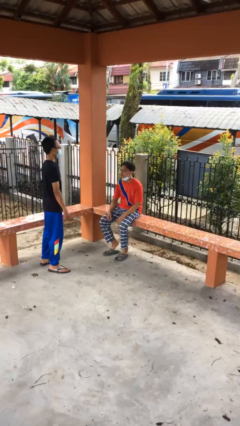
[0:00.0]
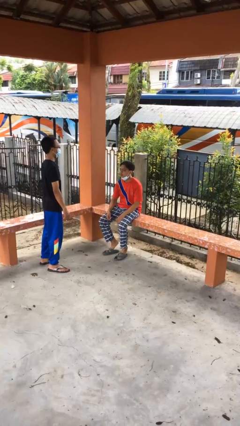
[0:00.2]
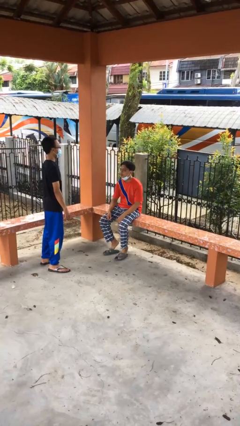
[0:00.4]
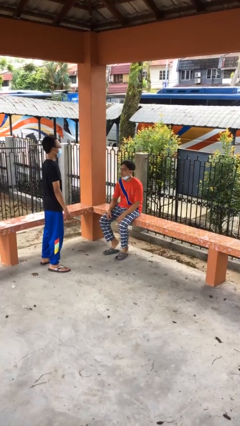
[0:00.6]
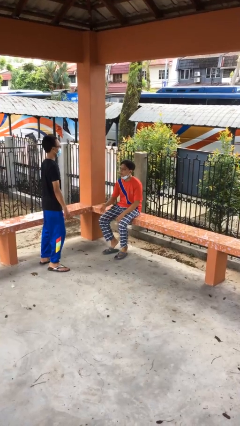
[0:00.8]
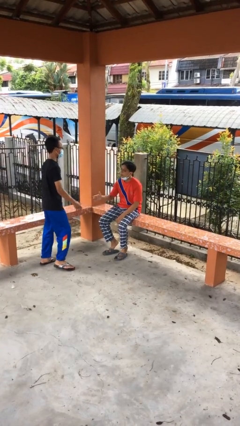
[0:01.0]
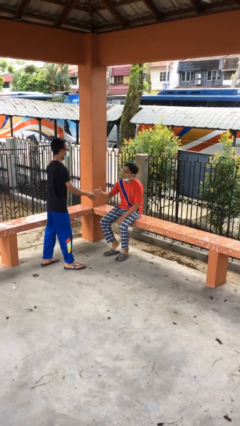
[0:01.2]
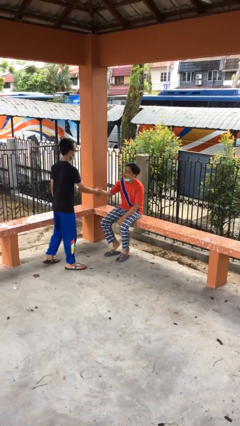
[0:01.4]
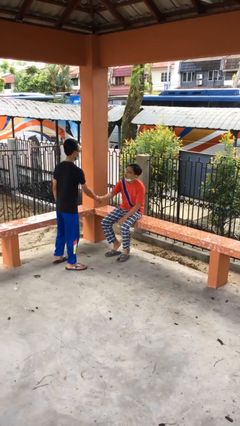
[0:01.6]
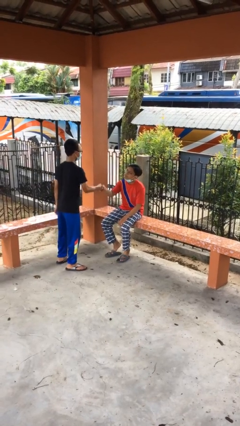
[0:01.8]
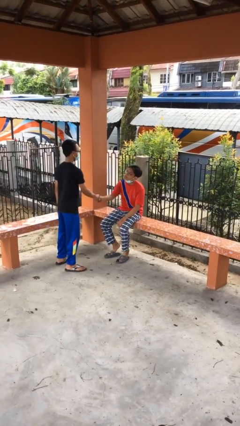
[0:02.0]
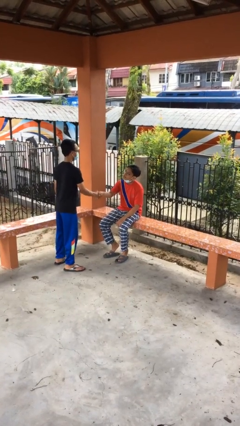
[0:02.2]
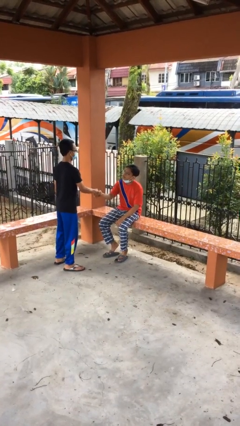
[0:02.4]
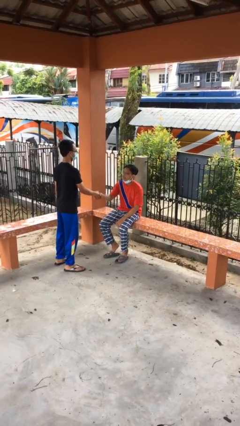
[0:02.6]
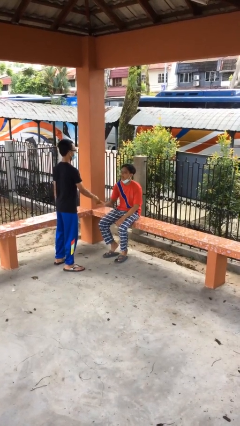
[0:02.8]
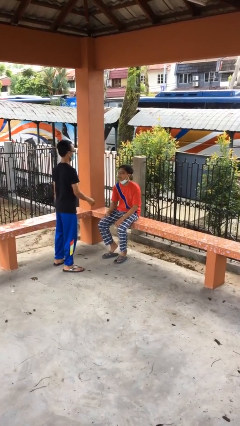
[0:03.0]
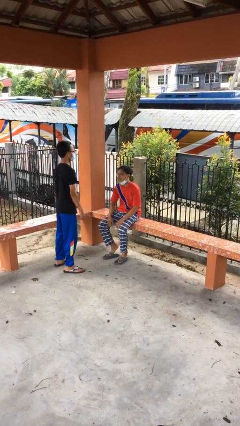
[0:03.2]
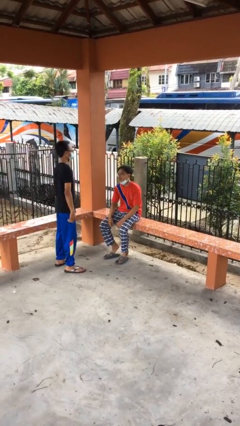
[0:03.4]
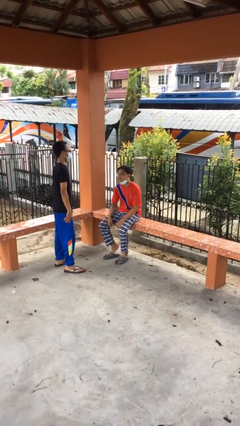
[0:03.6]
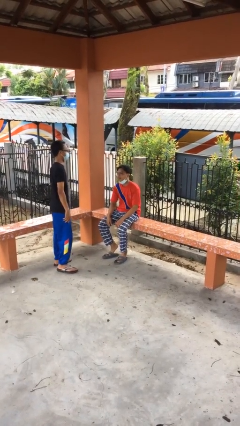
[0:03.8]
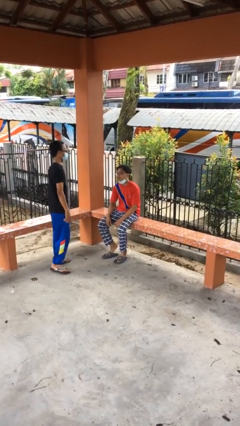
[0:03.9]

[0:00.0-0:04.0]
person shakes hand

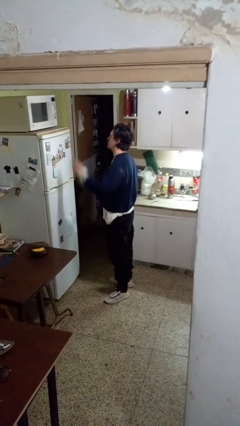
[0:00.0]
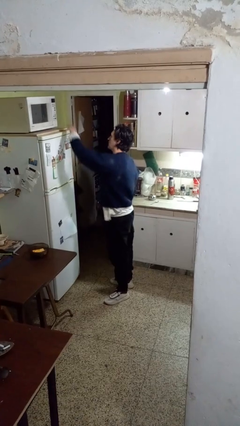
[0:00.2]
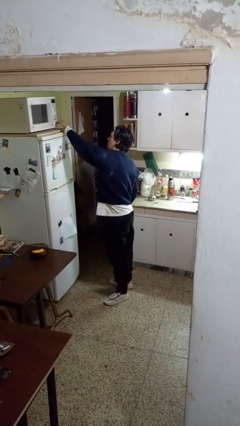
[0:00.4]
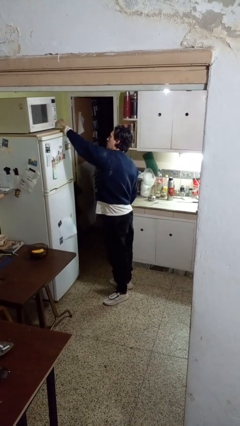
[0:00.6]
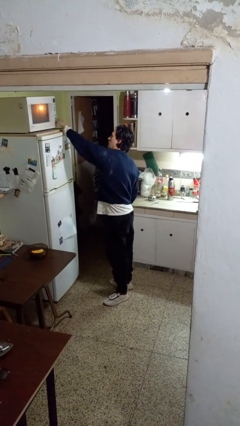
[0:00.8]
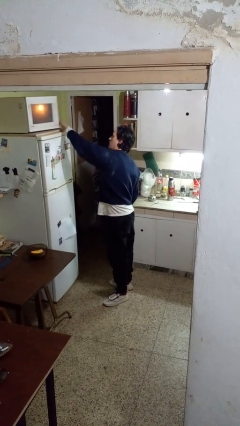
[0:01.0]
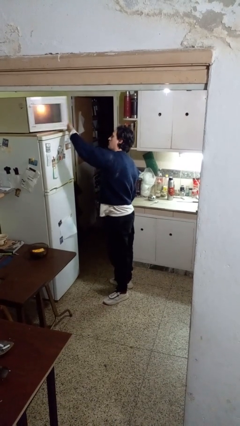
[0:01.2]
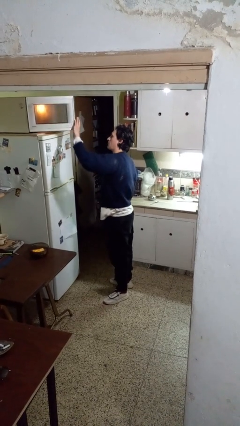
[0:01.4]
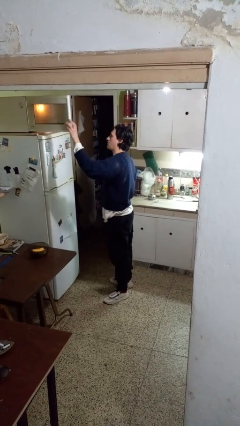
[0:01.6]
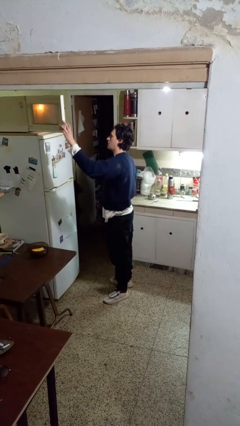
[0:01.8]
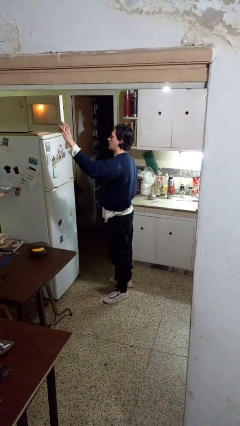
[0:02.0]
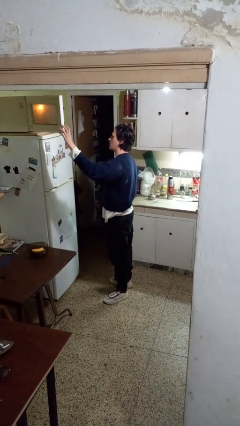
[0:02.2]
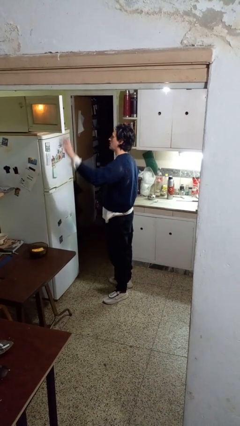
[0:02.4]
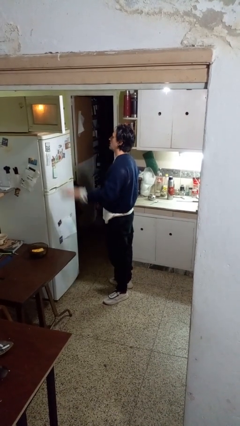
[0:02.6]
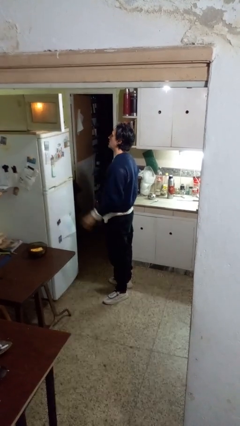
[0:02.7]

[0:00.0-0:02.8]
person opens microwave

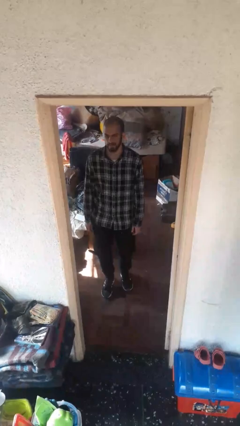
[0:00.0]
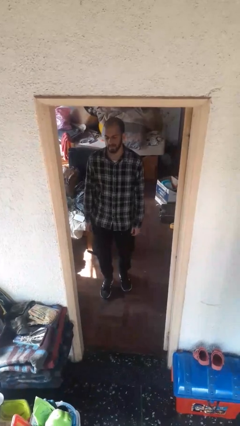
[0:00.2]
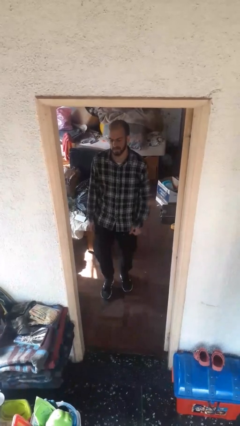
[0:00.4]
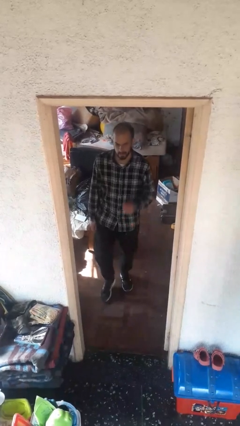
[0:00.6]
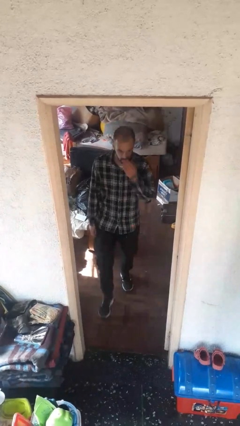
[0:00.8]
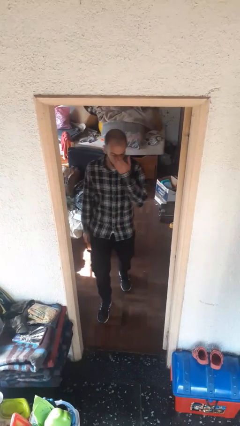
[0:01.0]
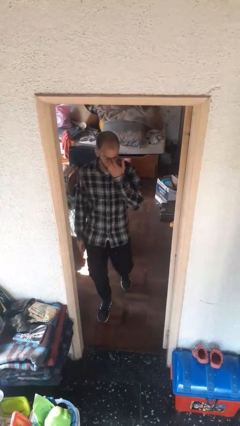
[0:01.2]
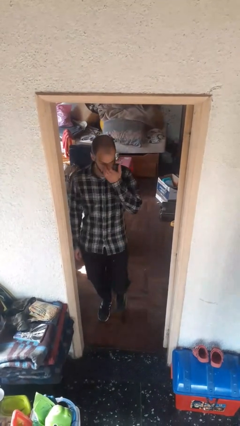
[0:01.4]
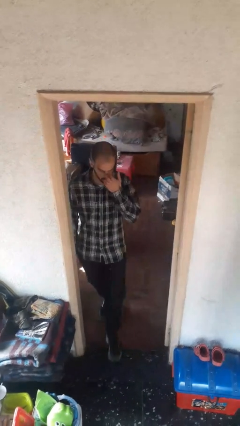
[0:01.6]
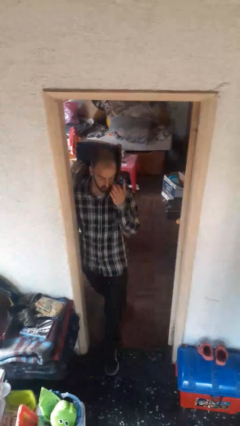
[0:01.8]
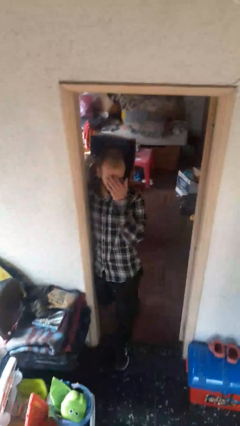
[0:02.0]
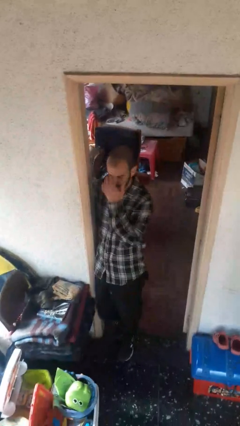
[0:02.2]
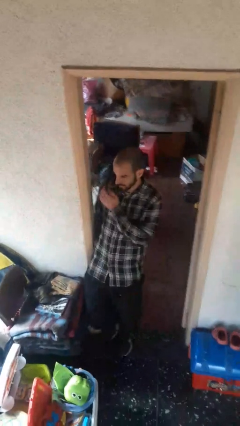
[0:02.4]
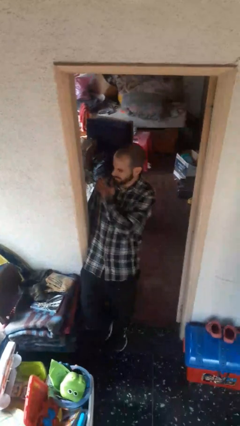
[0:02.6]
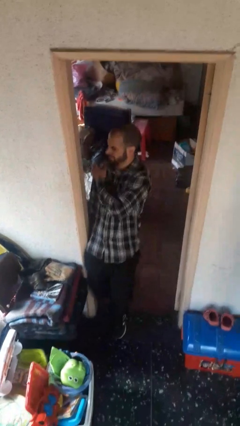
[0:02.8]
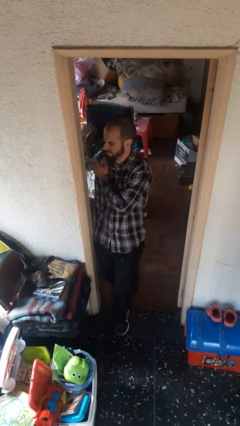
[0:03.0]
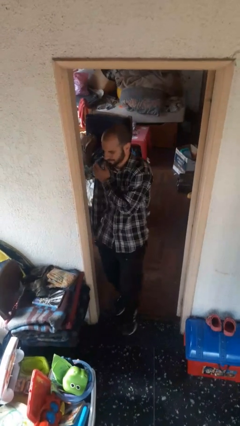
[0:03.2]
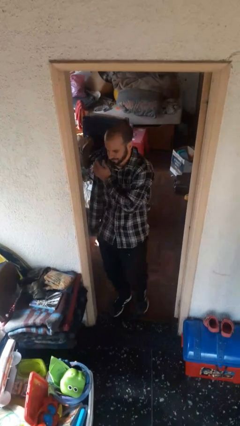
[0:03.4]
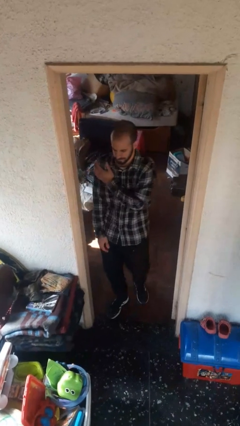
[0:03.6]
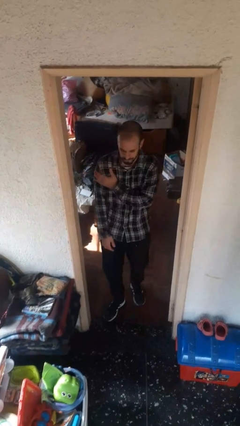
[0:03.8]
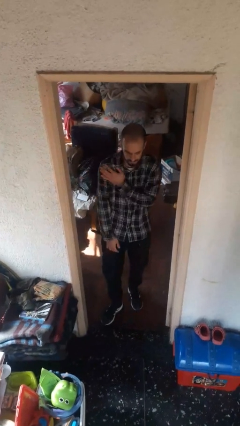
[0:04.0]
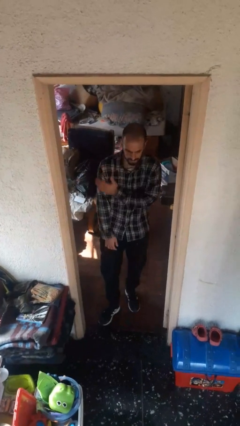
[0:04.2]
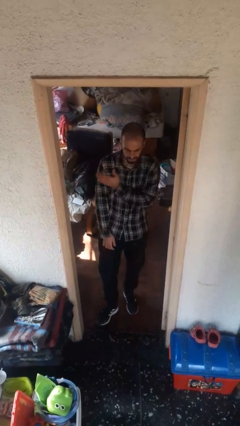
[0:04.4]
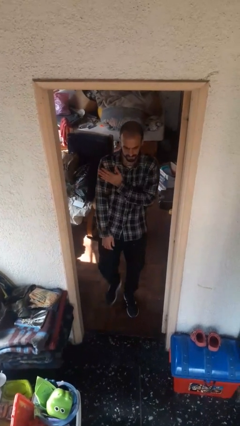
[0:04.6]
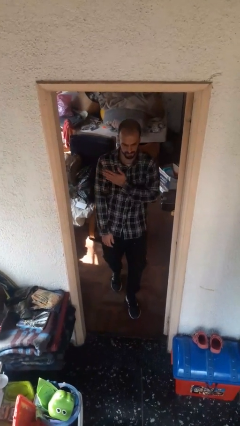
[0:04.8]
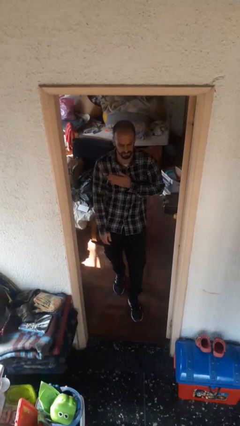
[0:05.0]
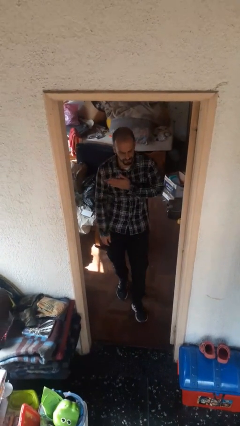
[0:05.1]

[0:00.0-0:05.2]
person bumps into wall

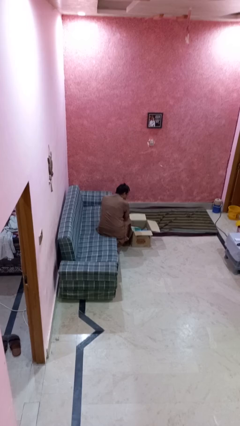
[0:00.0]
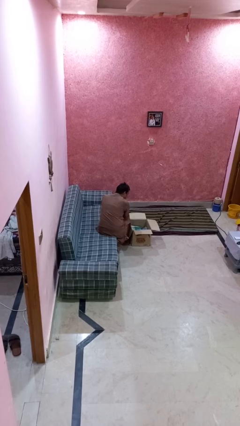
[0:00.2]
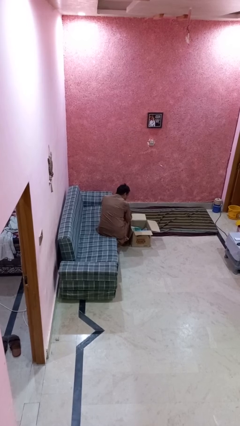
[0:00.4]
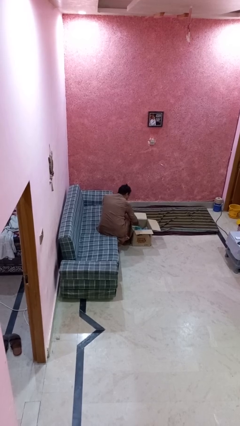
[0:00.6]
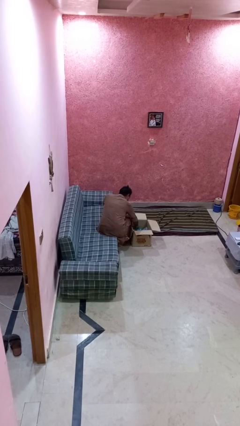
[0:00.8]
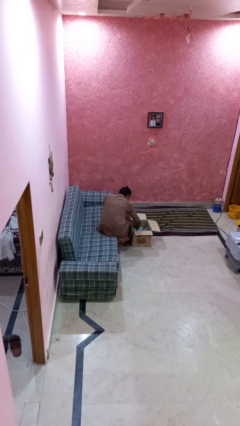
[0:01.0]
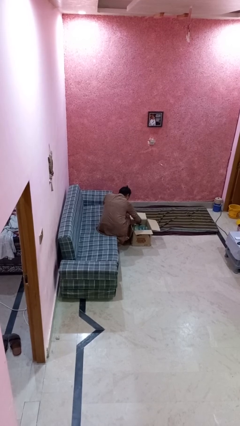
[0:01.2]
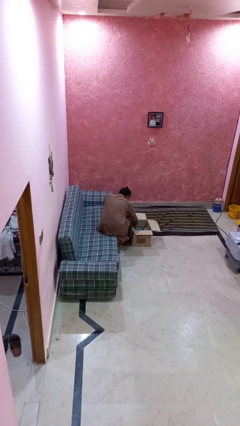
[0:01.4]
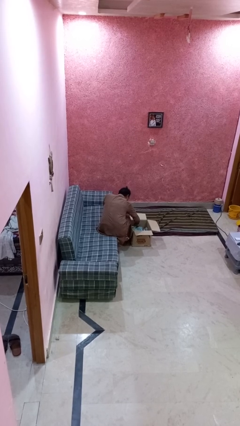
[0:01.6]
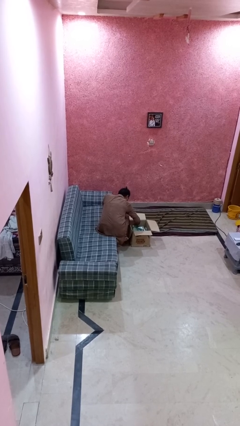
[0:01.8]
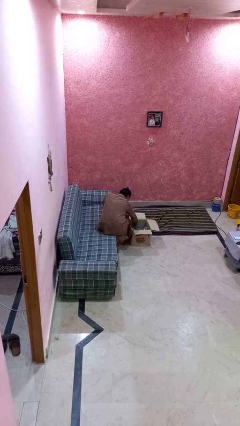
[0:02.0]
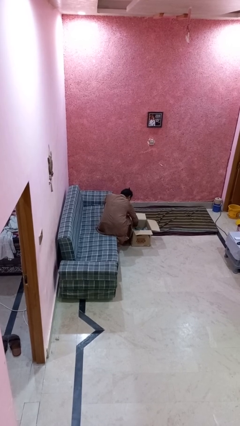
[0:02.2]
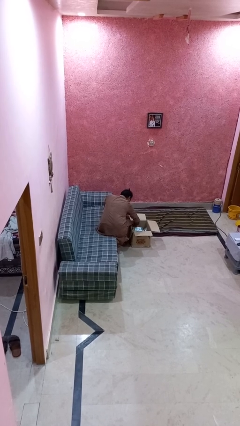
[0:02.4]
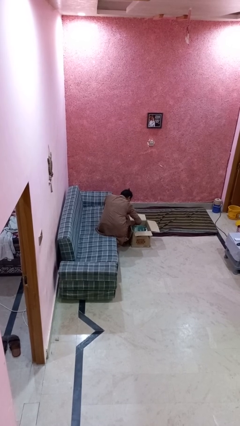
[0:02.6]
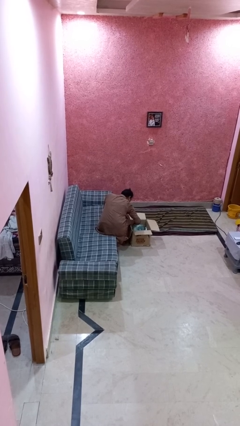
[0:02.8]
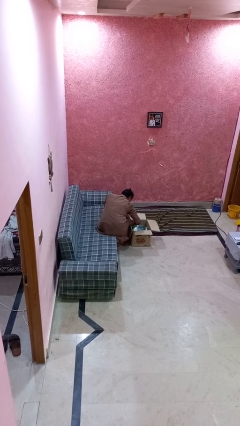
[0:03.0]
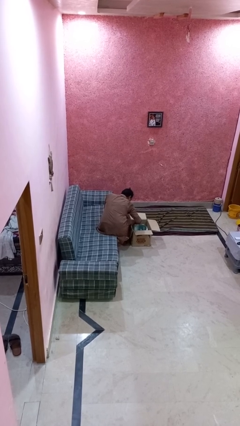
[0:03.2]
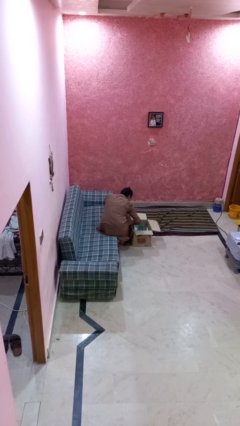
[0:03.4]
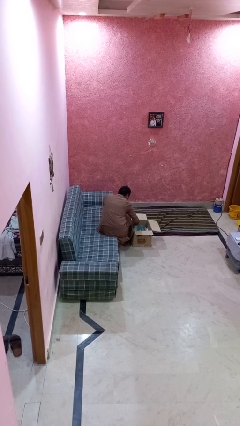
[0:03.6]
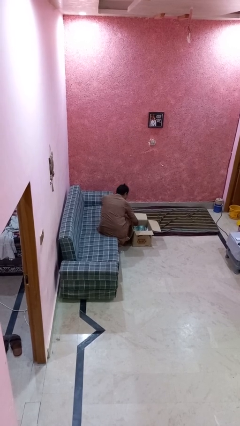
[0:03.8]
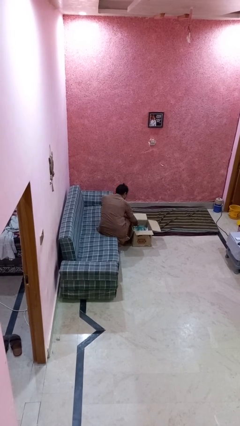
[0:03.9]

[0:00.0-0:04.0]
person searches in box

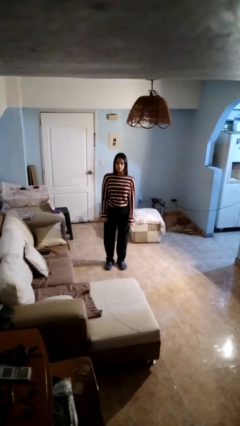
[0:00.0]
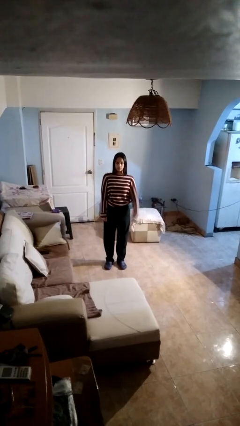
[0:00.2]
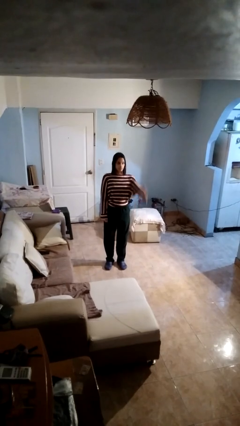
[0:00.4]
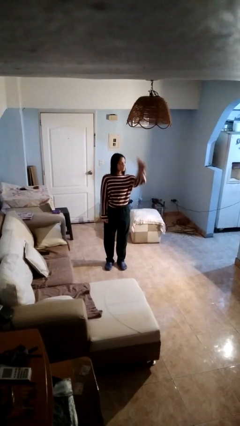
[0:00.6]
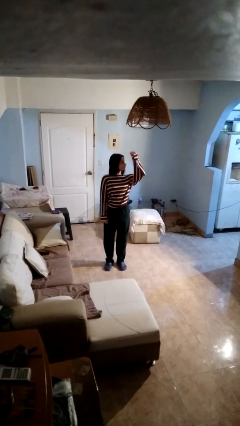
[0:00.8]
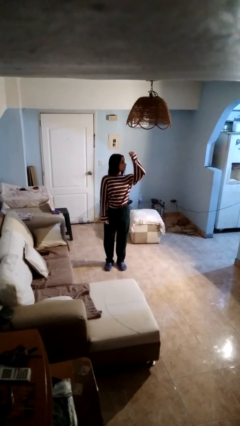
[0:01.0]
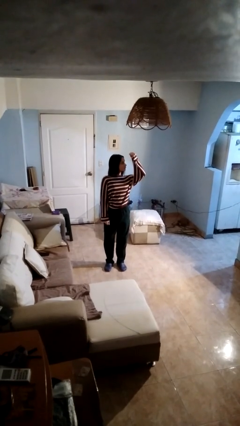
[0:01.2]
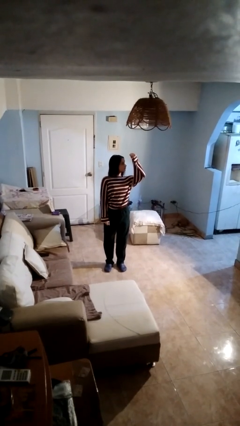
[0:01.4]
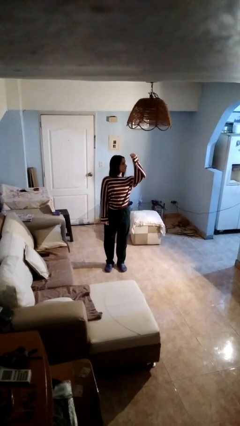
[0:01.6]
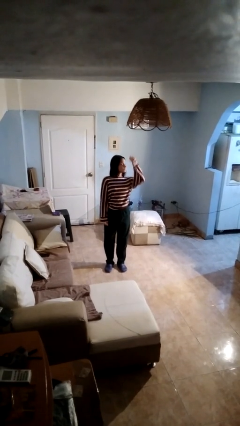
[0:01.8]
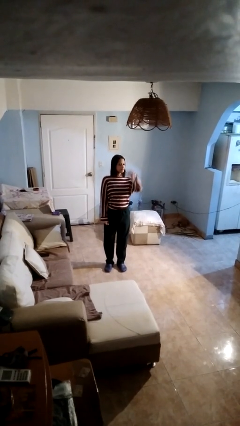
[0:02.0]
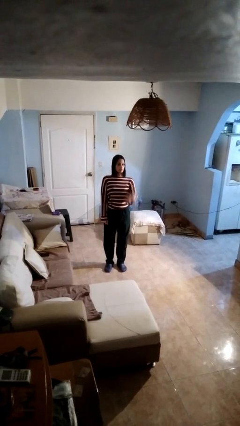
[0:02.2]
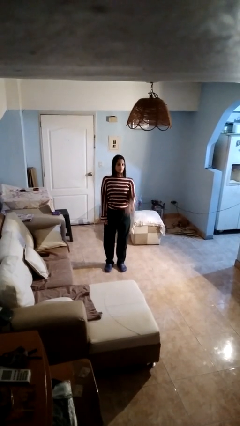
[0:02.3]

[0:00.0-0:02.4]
person gestures behind me
